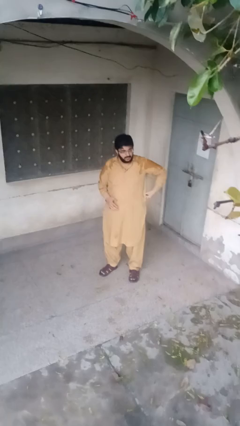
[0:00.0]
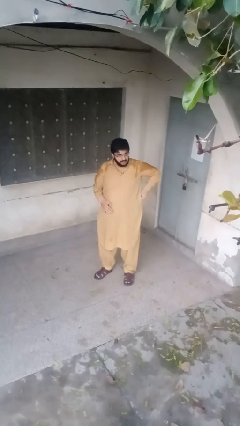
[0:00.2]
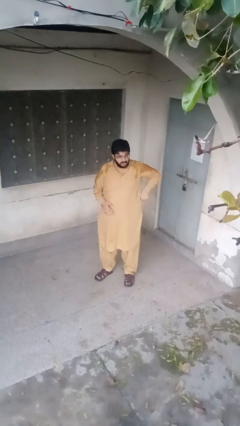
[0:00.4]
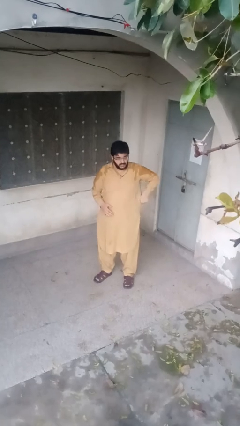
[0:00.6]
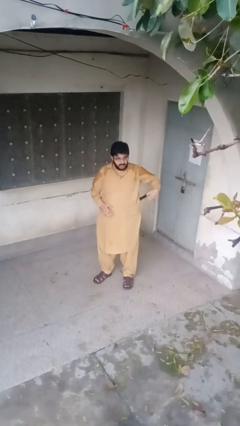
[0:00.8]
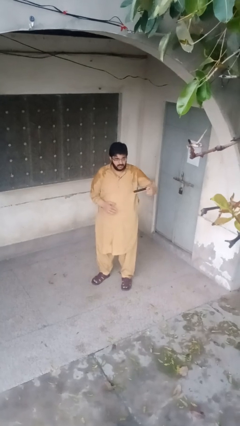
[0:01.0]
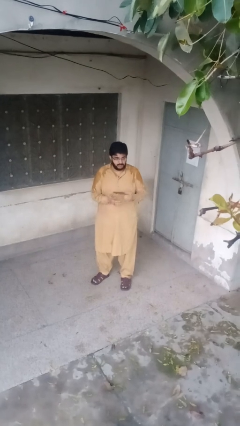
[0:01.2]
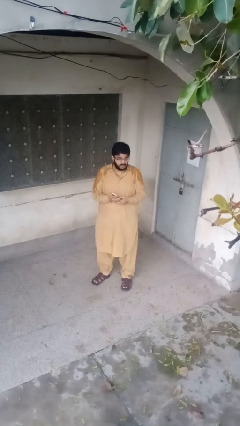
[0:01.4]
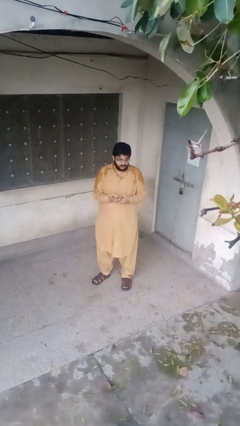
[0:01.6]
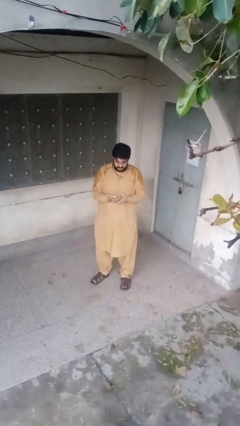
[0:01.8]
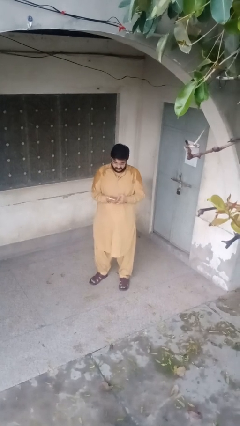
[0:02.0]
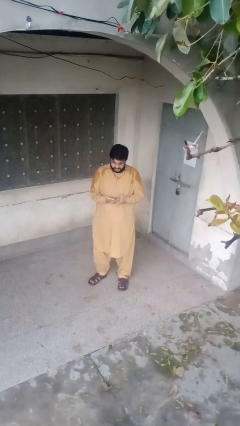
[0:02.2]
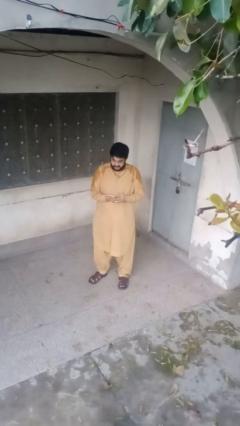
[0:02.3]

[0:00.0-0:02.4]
person takes phone from pocket

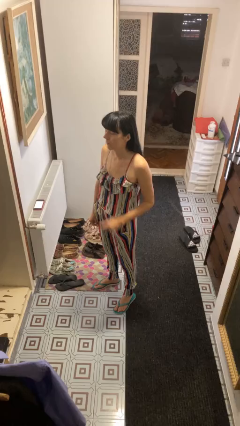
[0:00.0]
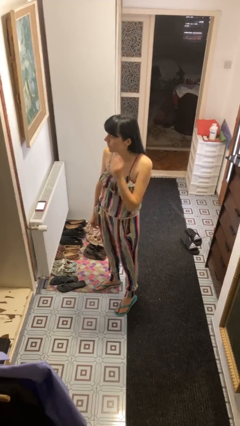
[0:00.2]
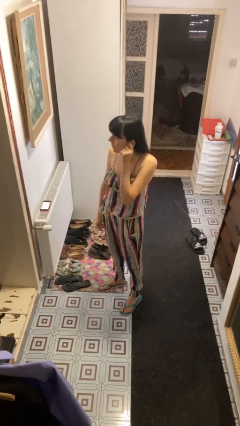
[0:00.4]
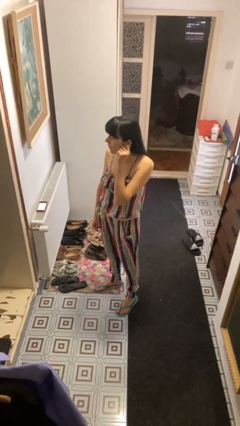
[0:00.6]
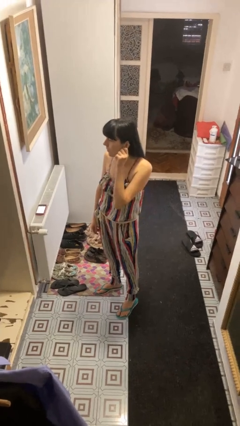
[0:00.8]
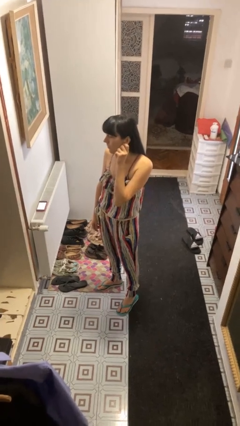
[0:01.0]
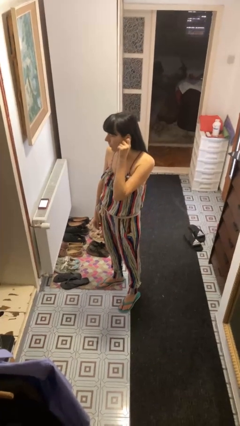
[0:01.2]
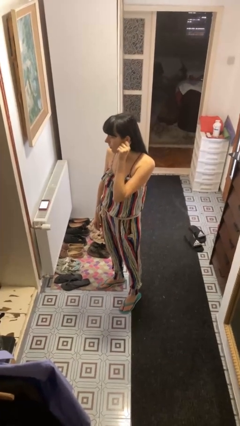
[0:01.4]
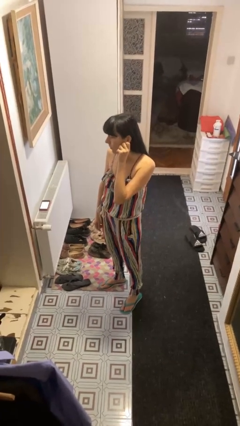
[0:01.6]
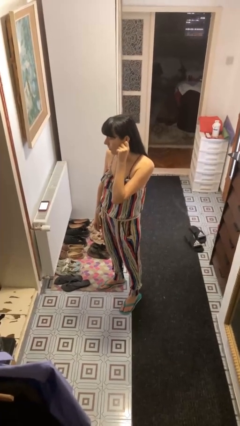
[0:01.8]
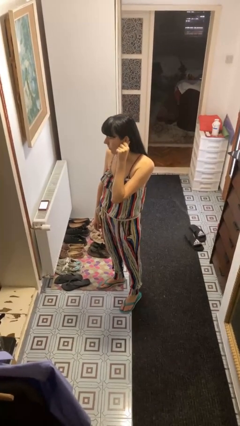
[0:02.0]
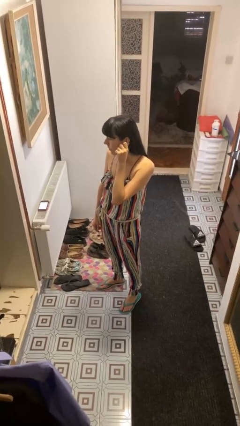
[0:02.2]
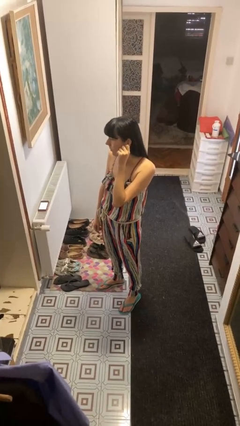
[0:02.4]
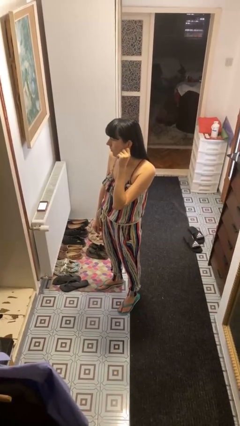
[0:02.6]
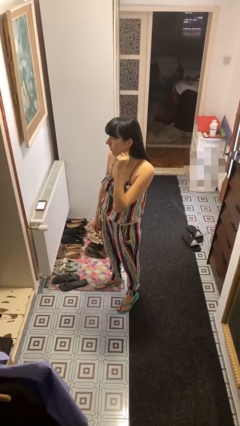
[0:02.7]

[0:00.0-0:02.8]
person touches earlobe

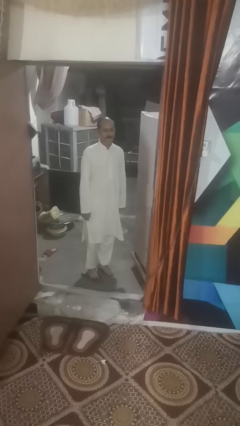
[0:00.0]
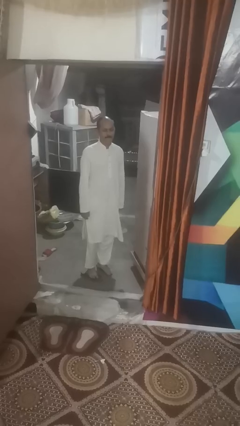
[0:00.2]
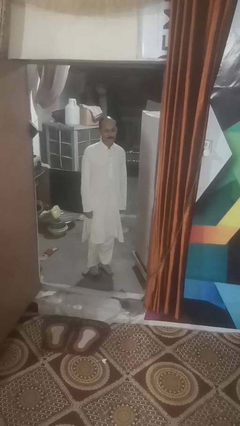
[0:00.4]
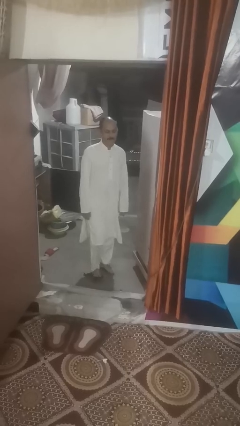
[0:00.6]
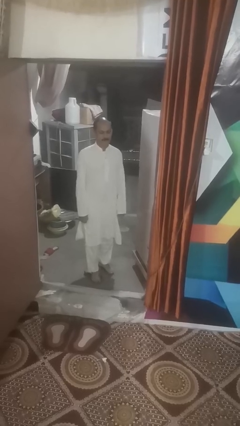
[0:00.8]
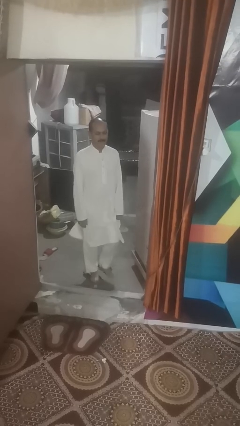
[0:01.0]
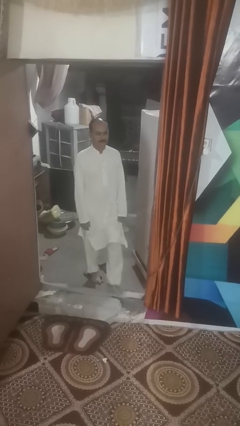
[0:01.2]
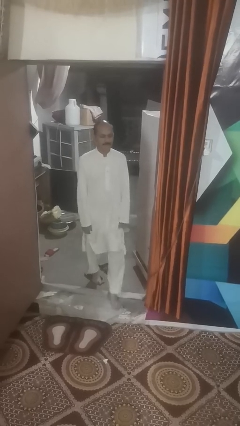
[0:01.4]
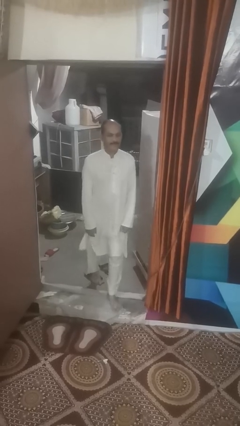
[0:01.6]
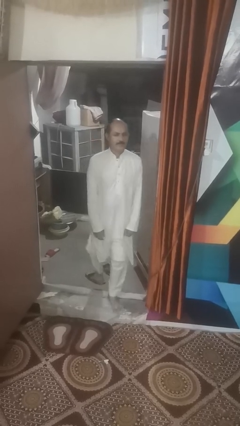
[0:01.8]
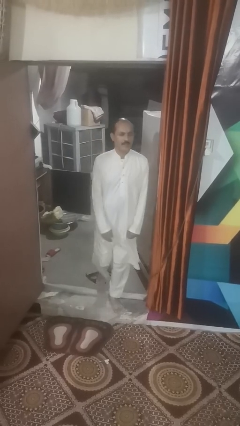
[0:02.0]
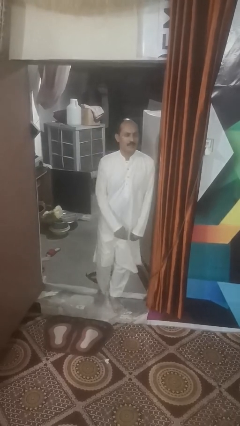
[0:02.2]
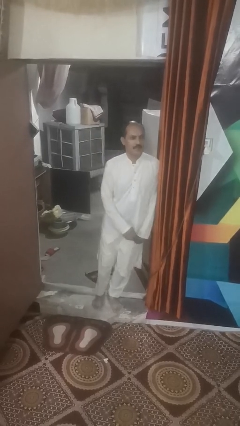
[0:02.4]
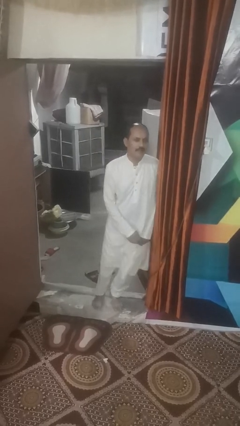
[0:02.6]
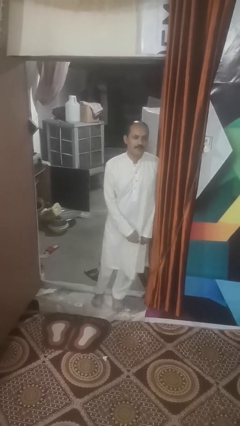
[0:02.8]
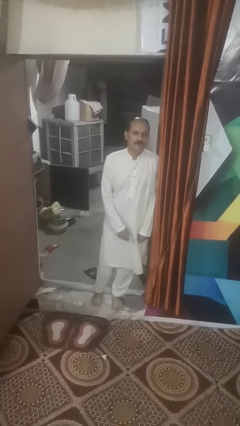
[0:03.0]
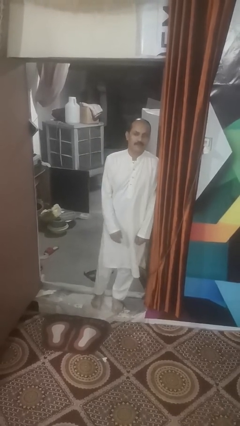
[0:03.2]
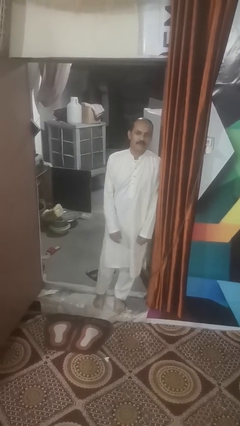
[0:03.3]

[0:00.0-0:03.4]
person bumps into wall

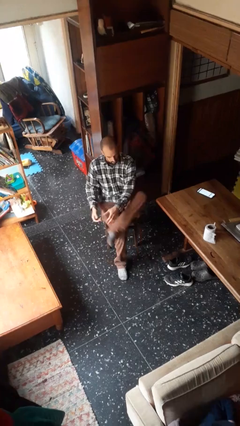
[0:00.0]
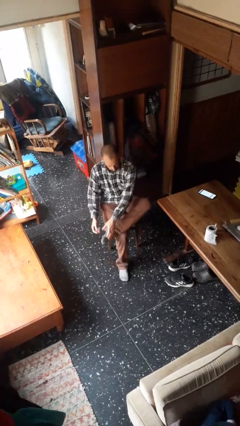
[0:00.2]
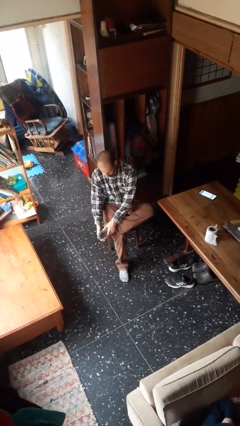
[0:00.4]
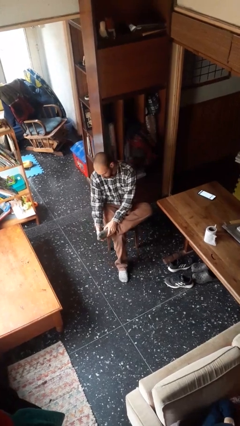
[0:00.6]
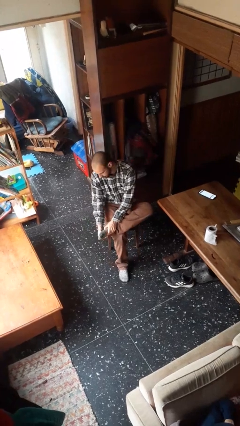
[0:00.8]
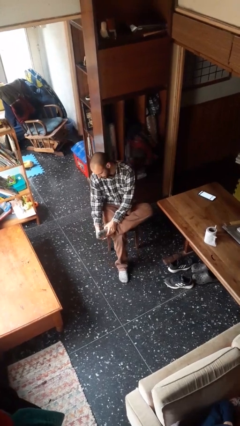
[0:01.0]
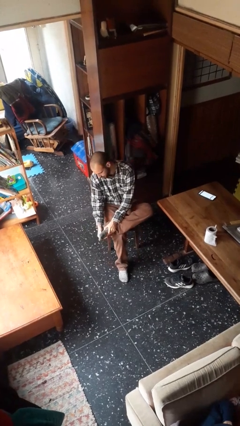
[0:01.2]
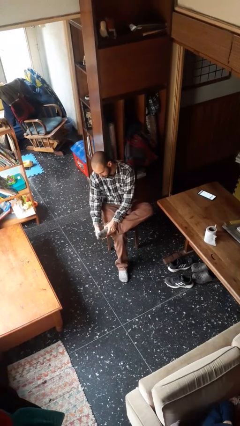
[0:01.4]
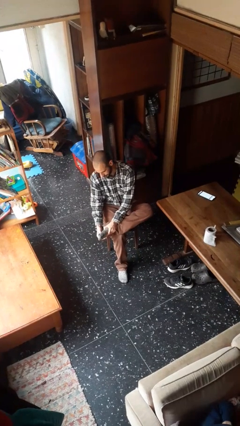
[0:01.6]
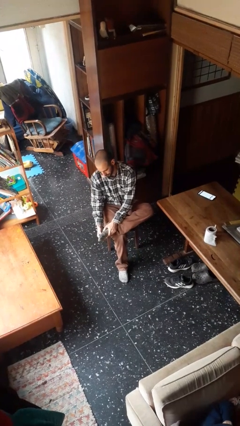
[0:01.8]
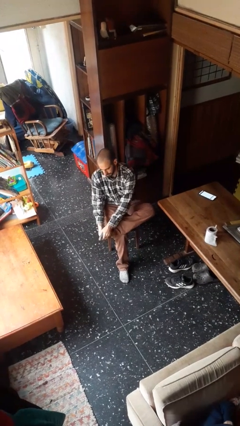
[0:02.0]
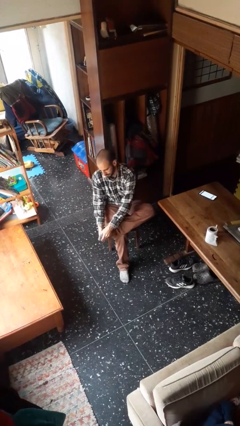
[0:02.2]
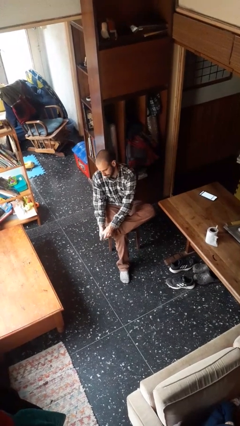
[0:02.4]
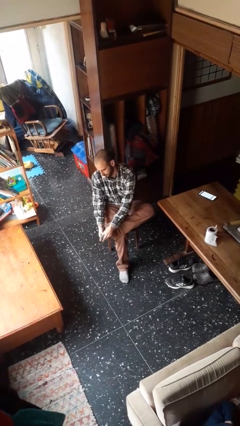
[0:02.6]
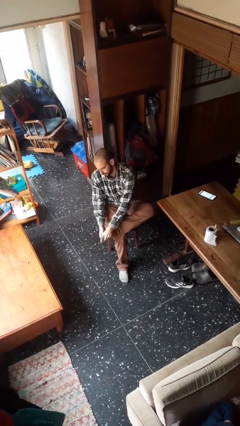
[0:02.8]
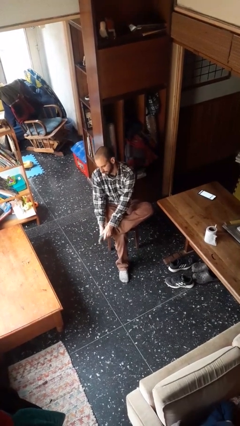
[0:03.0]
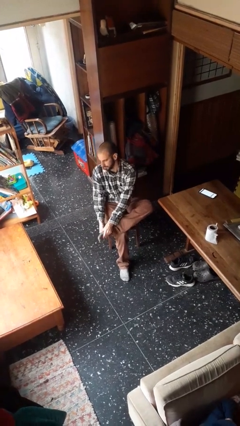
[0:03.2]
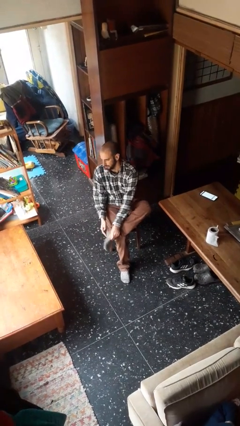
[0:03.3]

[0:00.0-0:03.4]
person rubs foot

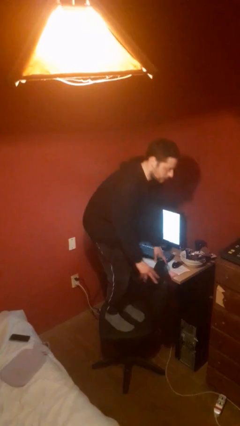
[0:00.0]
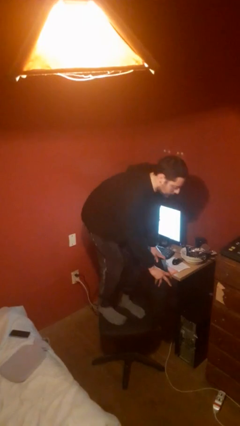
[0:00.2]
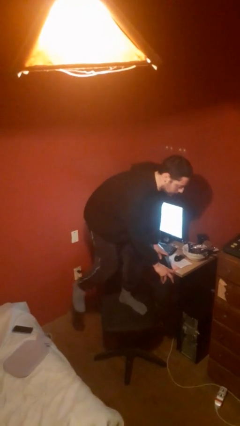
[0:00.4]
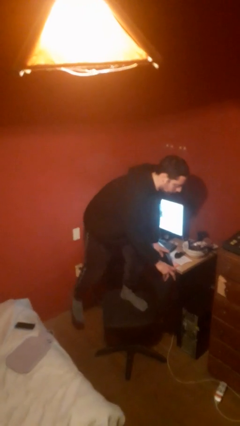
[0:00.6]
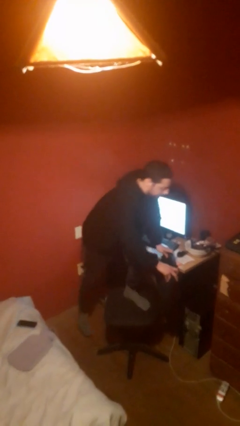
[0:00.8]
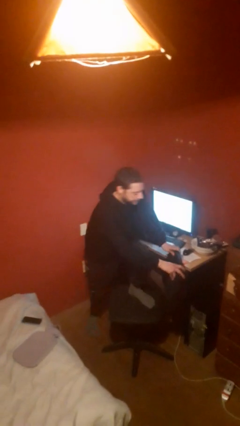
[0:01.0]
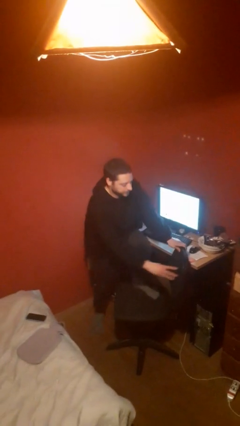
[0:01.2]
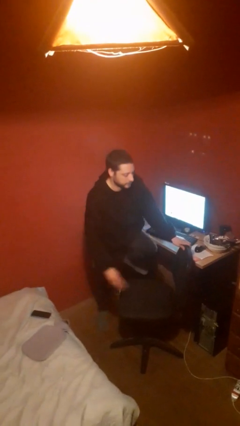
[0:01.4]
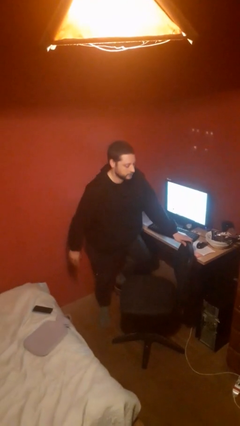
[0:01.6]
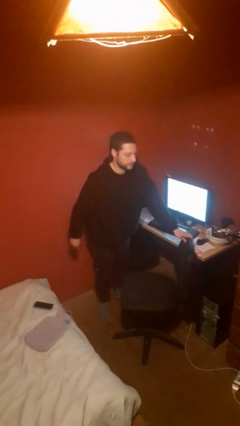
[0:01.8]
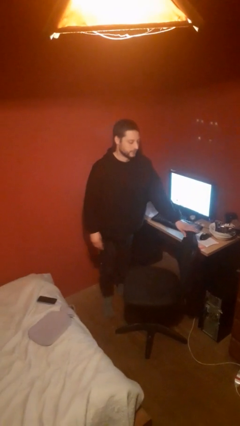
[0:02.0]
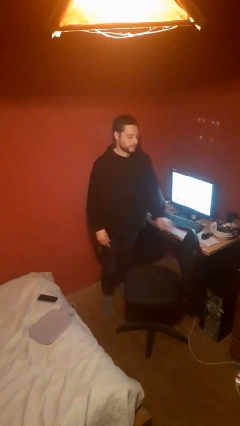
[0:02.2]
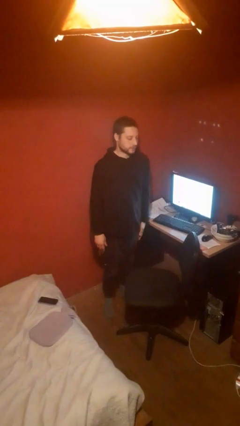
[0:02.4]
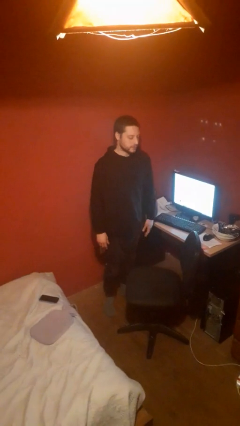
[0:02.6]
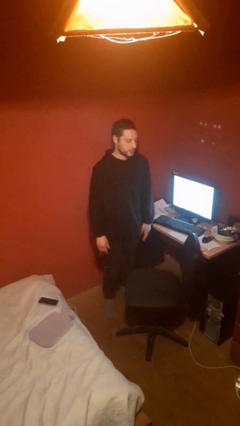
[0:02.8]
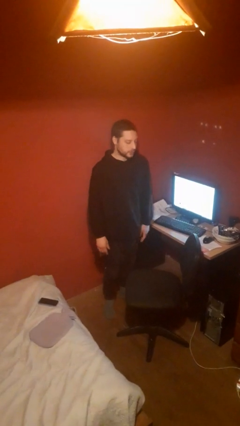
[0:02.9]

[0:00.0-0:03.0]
person climbs off chair

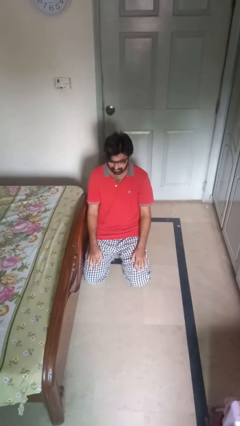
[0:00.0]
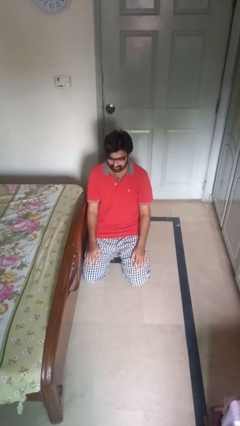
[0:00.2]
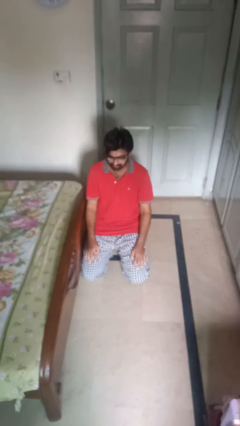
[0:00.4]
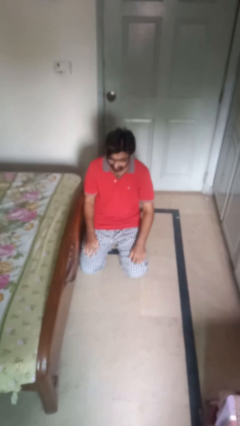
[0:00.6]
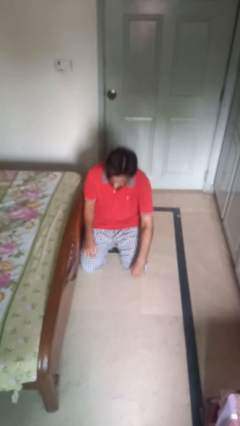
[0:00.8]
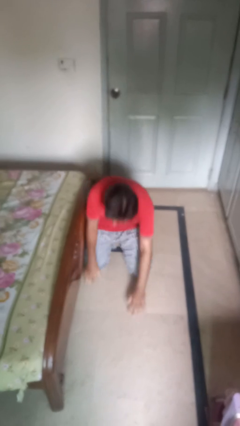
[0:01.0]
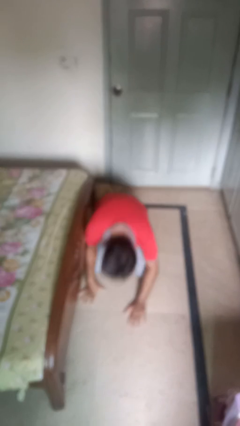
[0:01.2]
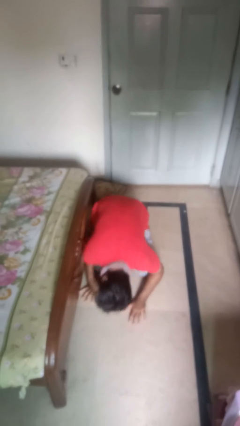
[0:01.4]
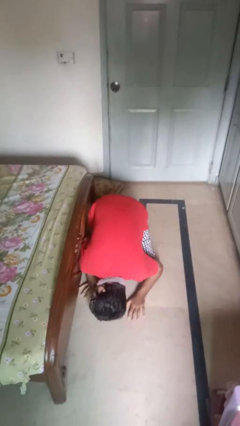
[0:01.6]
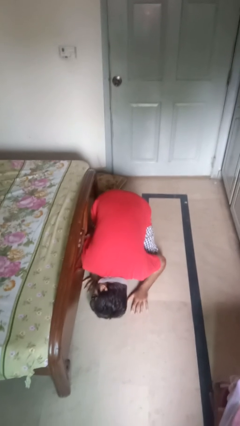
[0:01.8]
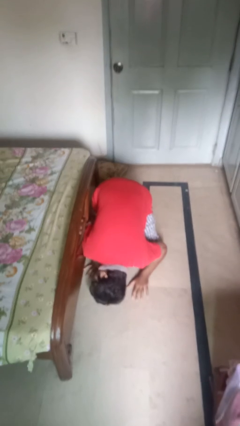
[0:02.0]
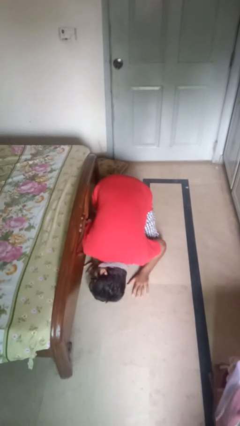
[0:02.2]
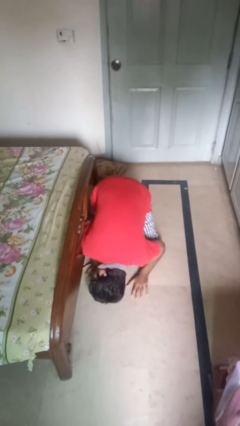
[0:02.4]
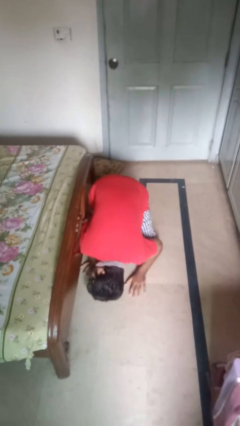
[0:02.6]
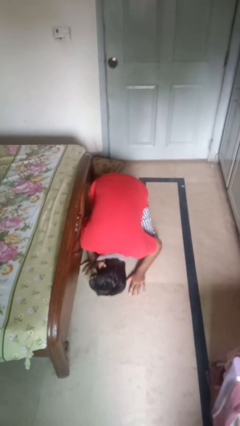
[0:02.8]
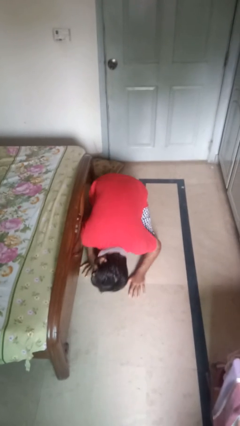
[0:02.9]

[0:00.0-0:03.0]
person searches under bed
